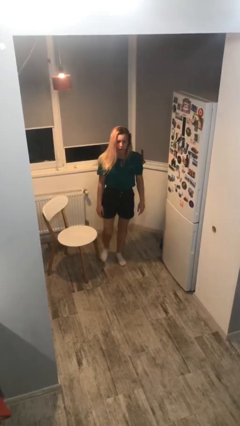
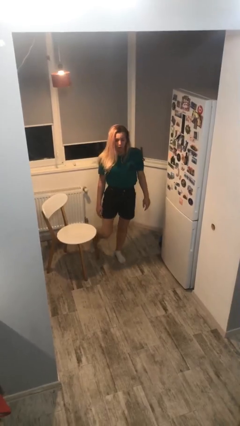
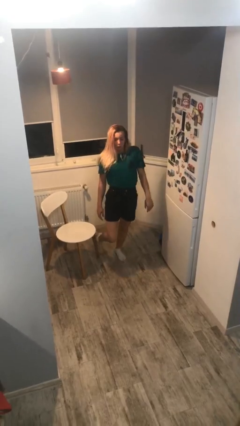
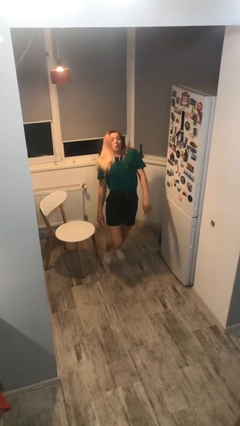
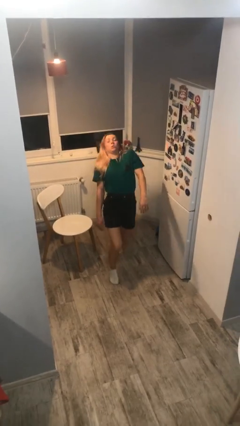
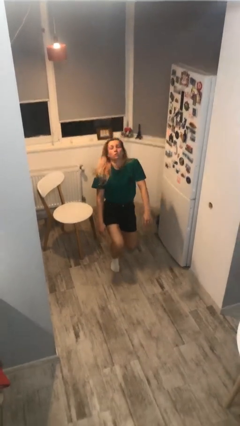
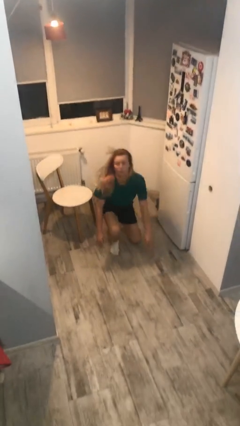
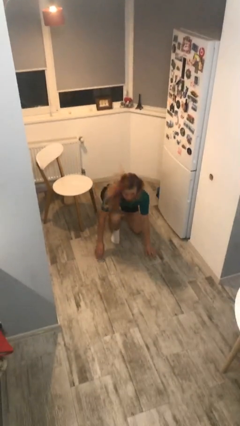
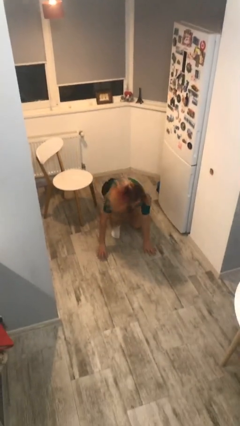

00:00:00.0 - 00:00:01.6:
person trips on object on floor

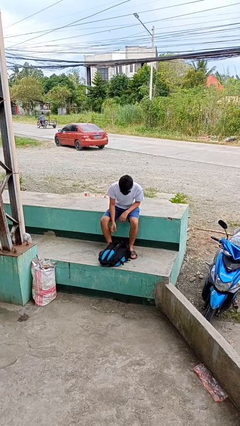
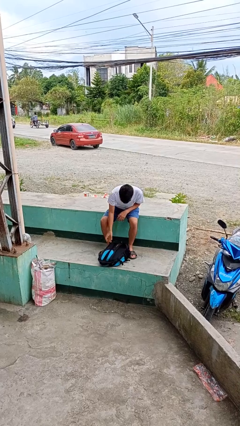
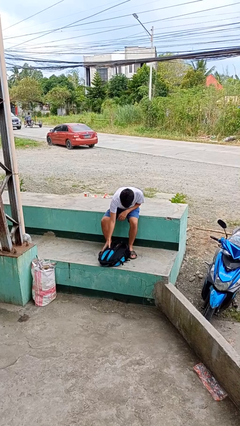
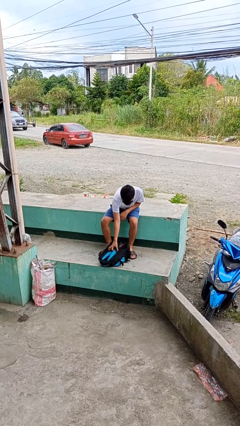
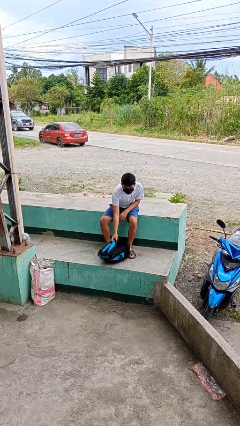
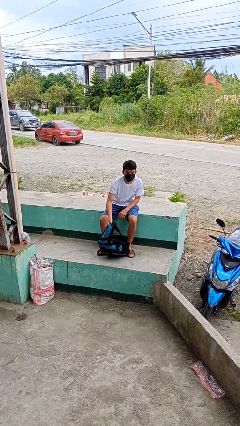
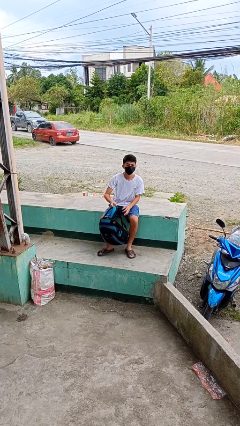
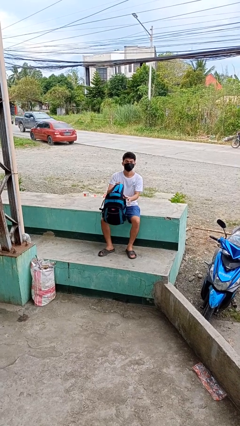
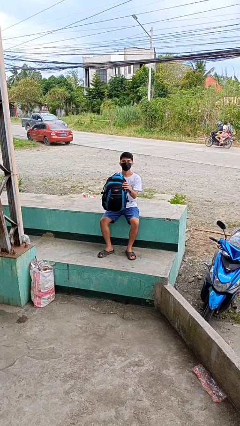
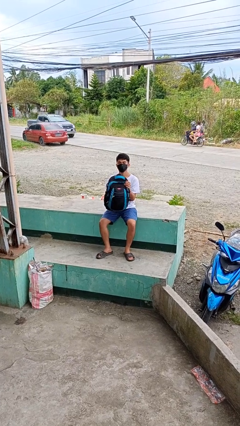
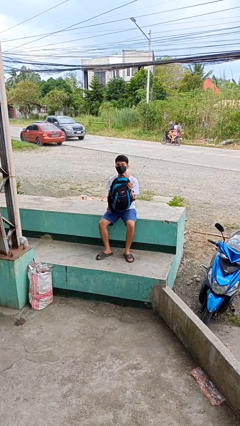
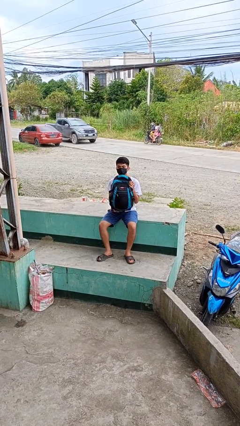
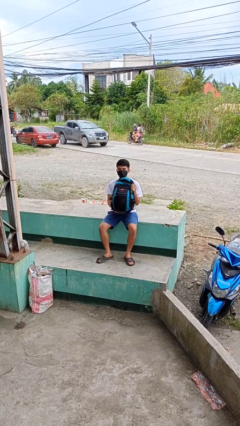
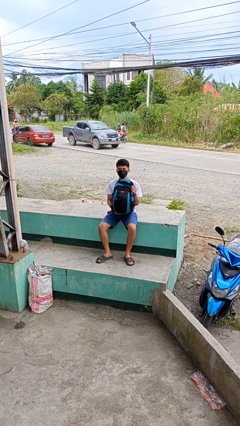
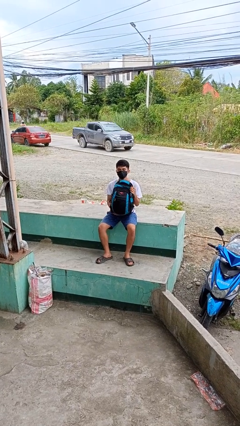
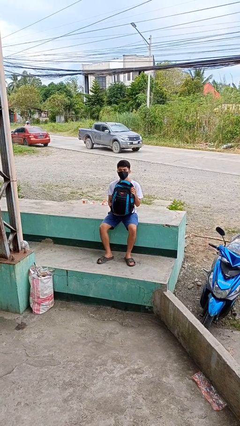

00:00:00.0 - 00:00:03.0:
person picks up object from floor

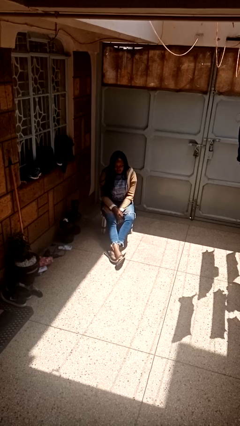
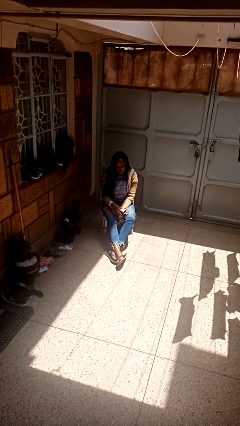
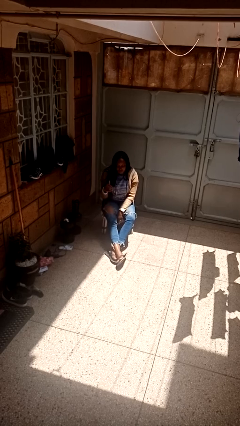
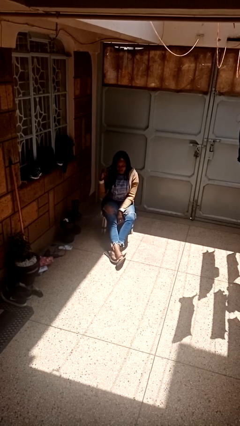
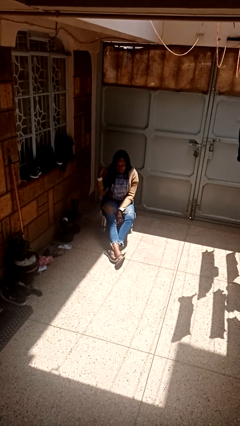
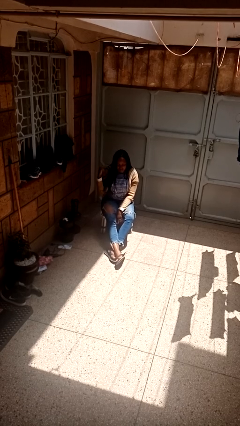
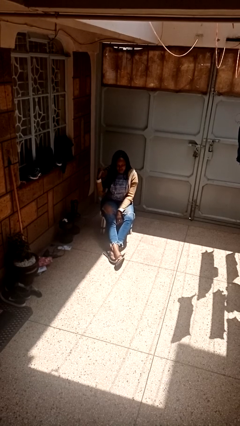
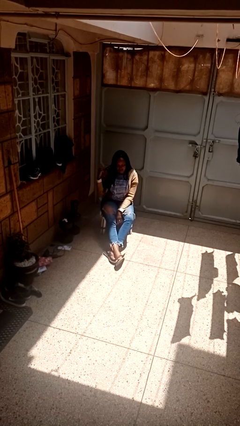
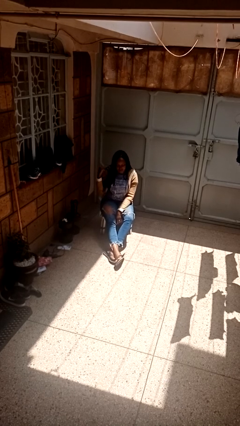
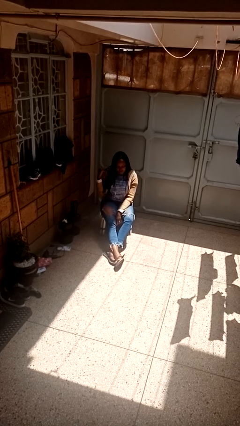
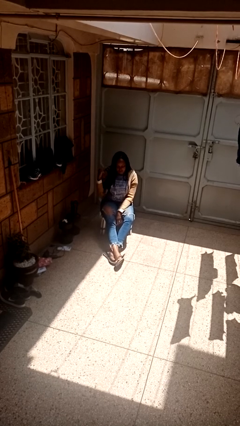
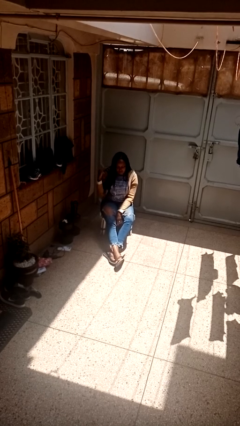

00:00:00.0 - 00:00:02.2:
person gestures behind me

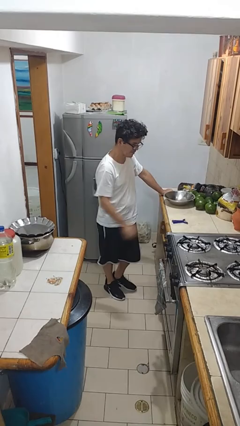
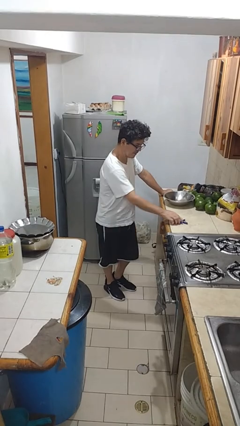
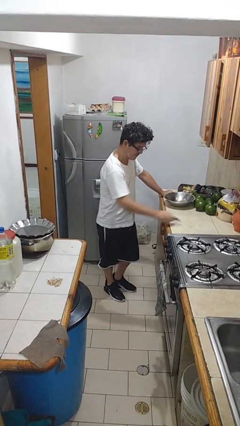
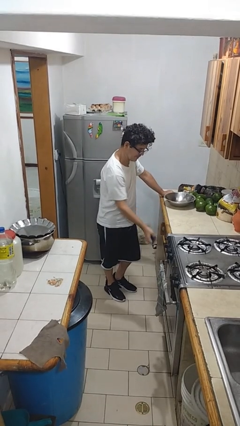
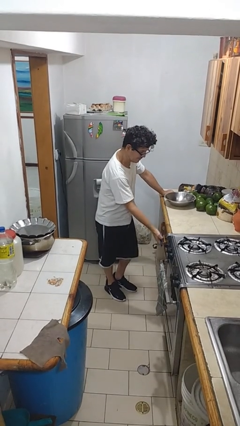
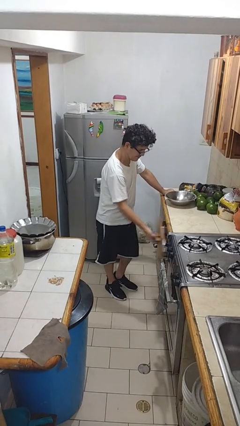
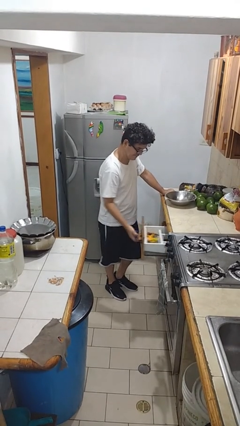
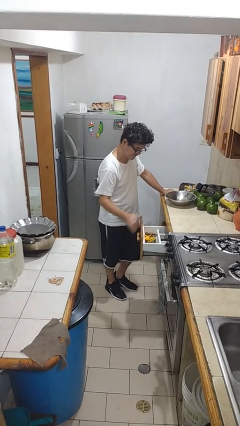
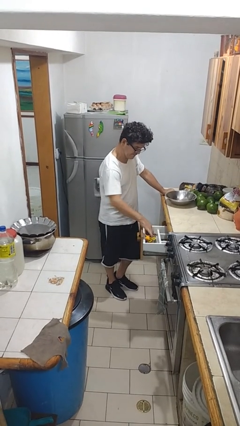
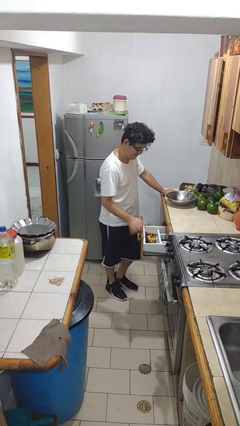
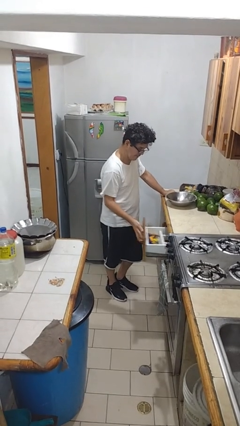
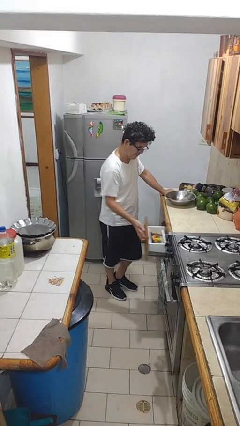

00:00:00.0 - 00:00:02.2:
person puts object into kitchen drawer

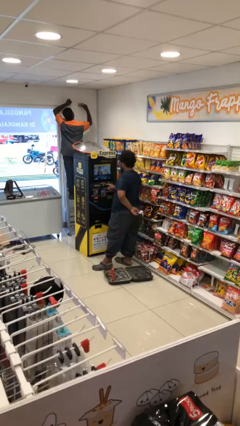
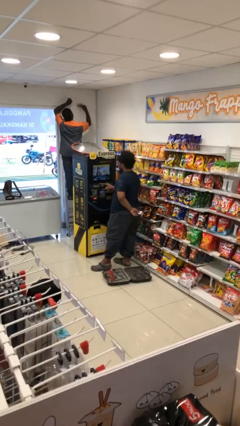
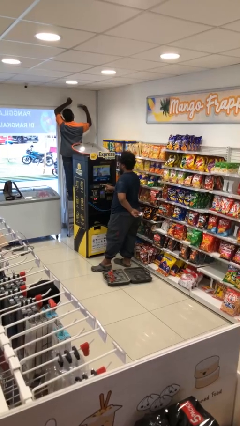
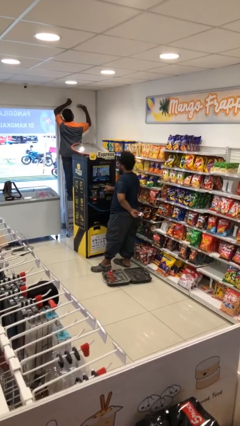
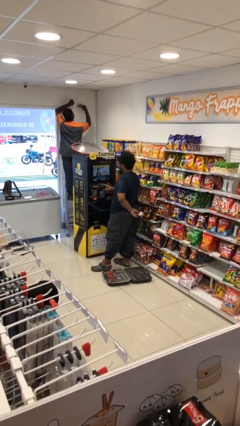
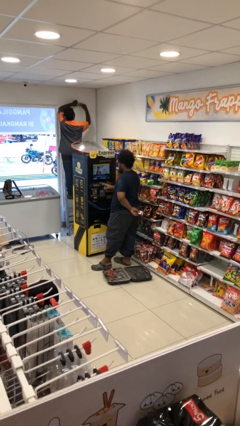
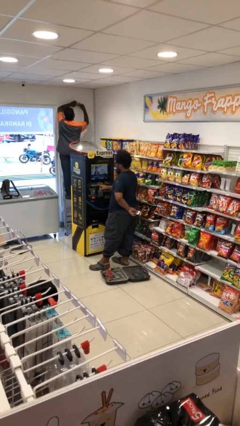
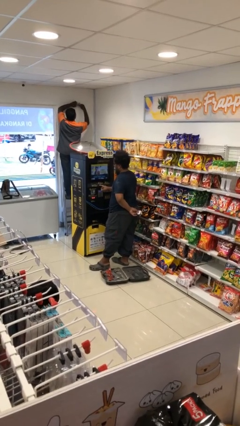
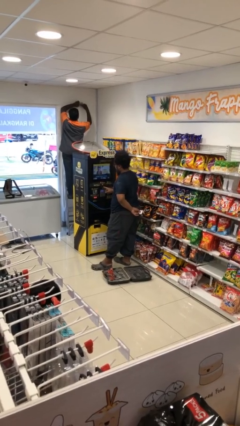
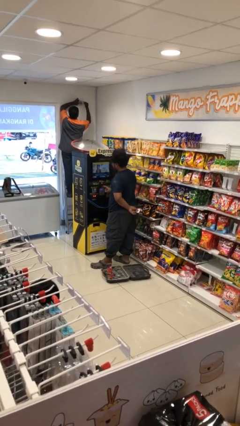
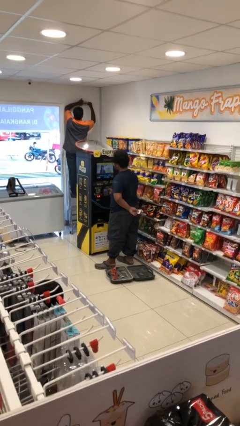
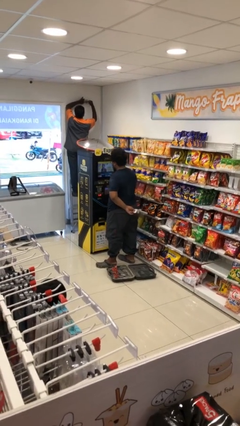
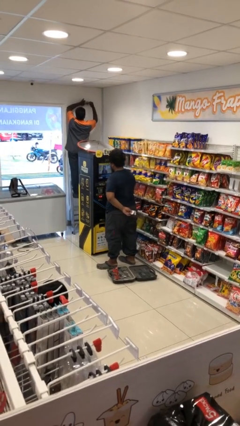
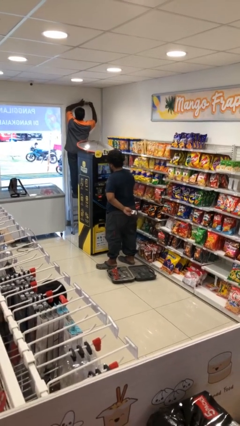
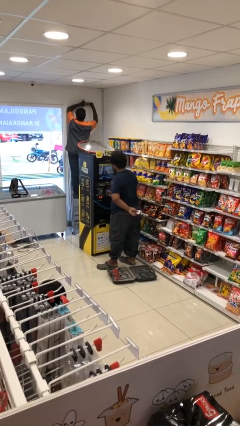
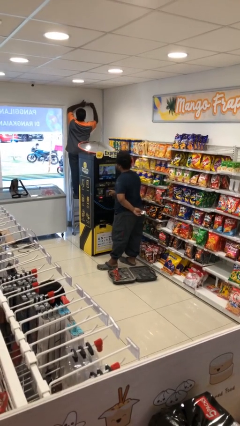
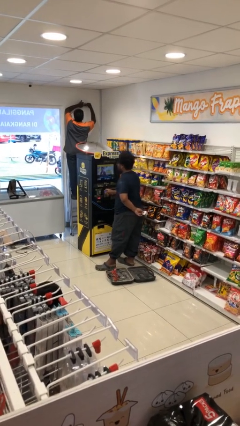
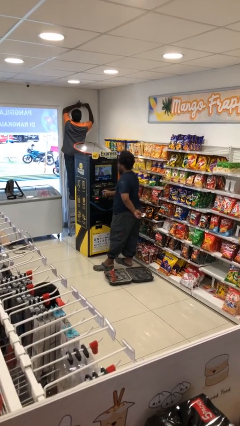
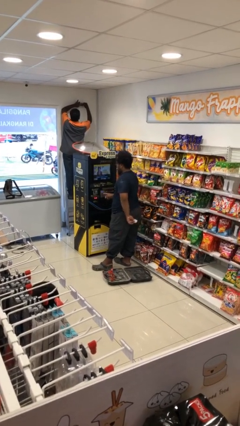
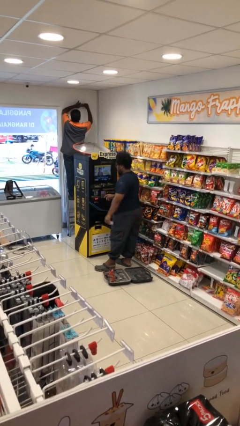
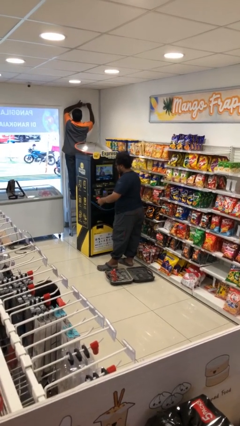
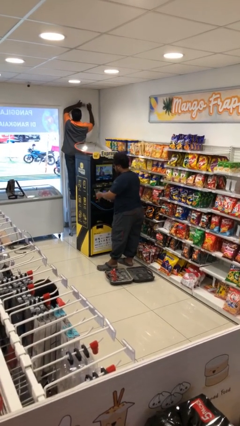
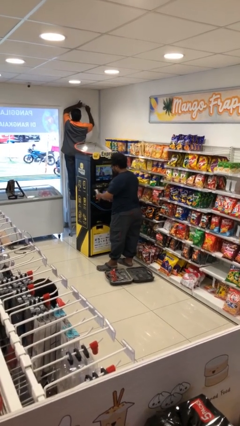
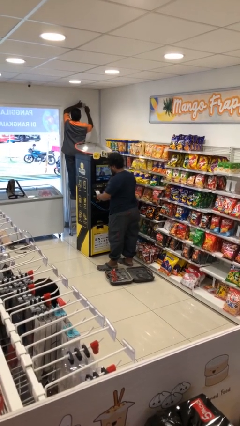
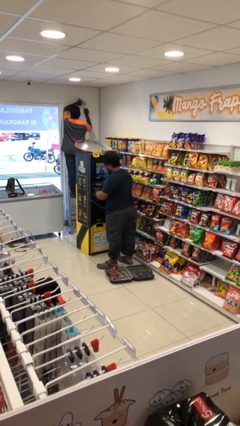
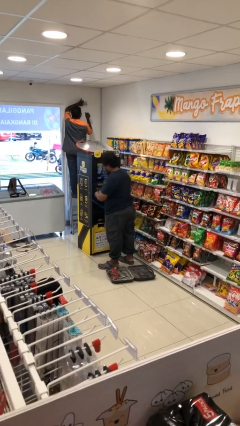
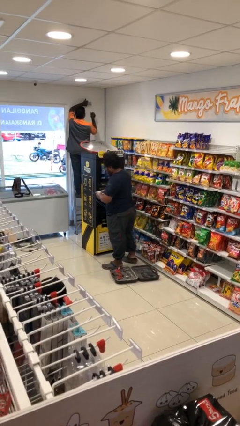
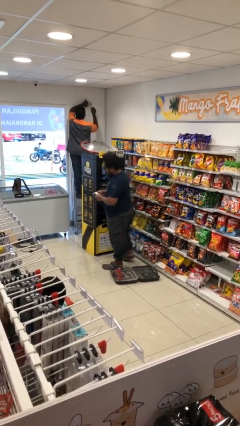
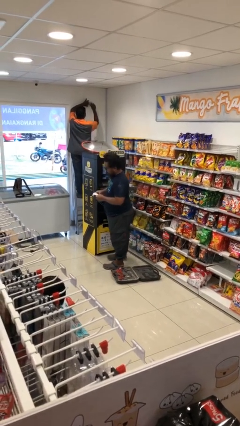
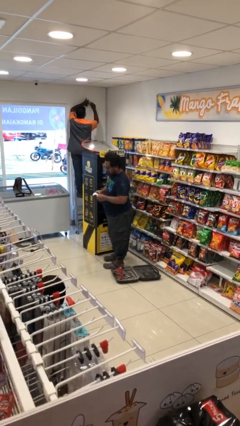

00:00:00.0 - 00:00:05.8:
person purchases from machine

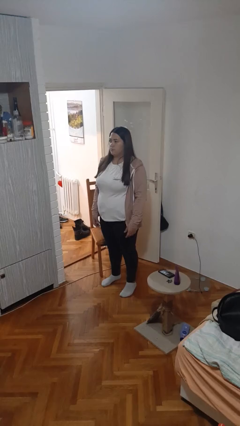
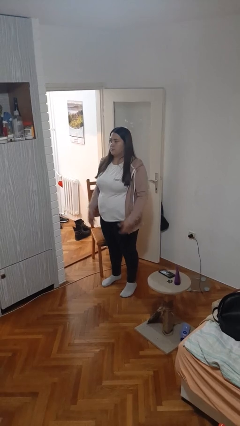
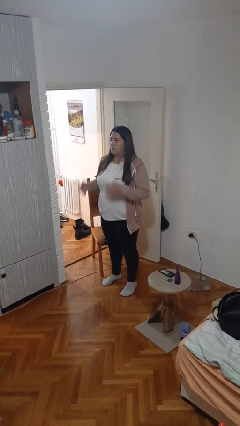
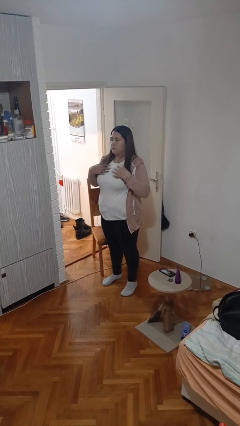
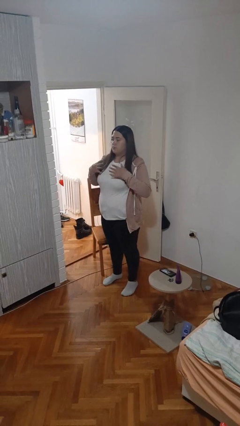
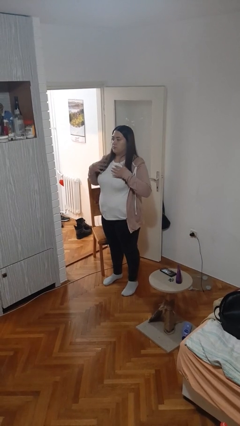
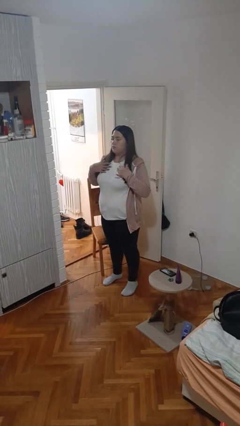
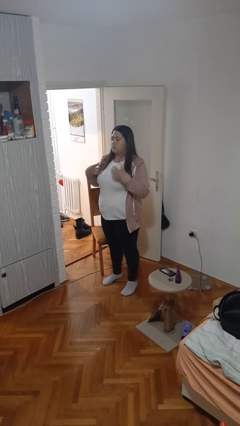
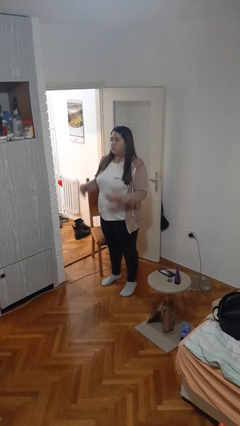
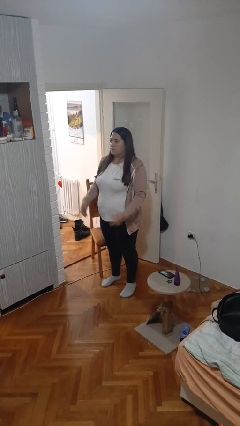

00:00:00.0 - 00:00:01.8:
person drums on chest

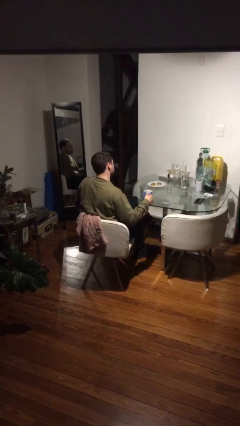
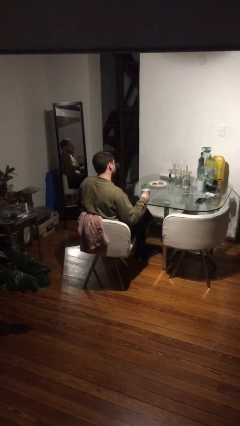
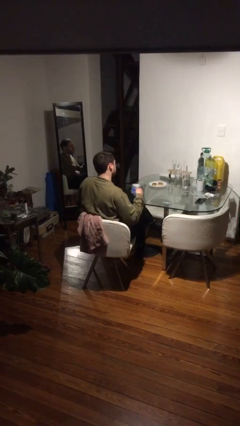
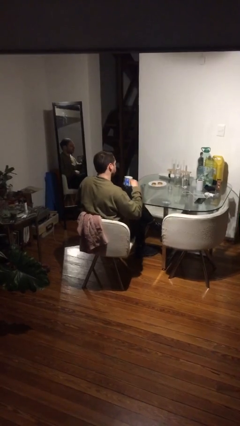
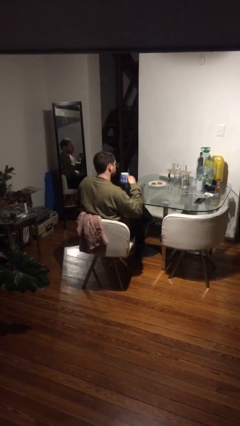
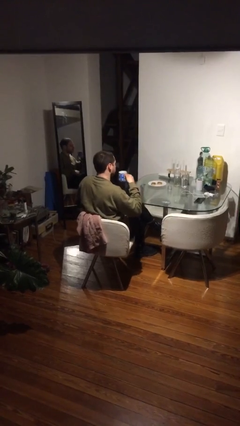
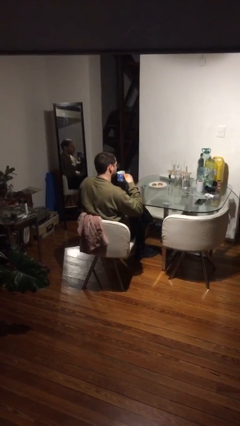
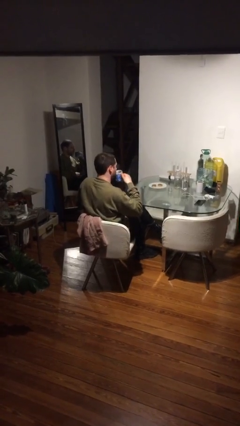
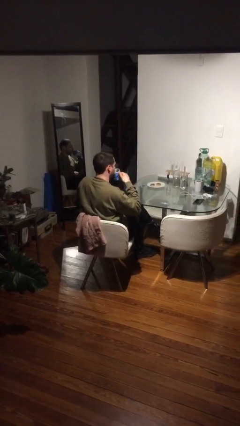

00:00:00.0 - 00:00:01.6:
person picks up object from table
